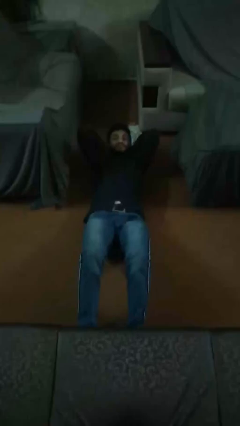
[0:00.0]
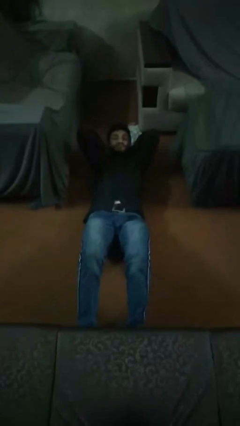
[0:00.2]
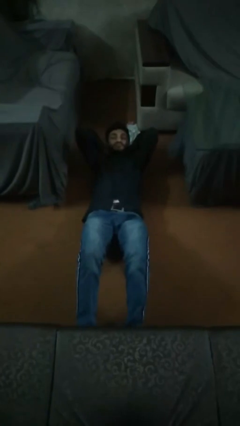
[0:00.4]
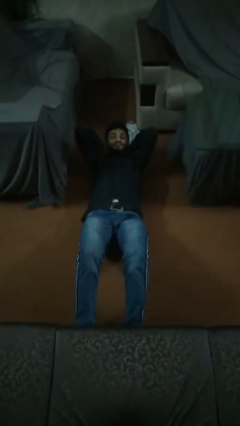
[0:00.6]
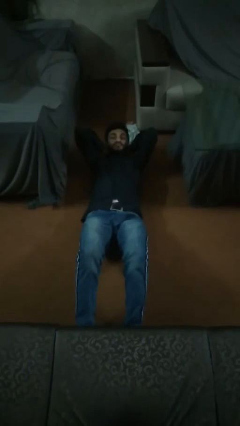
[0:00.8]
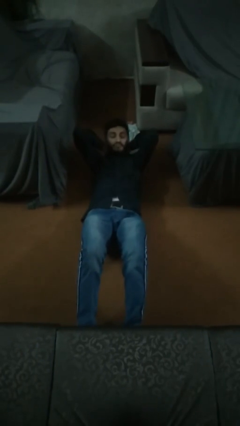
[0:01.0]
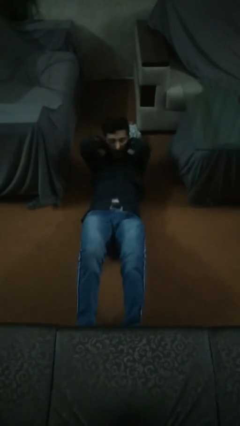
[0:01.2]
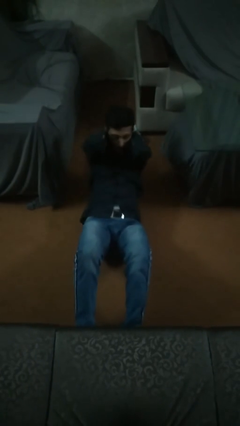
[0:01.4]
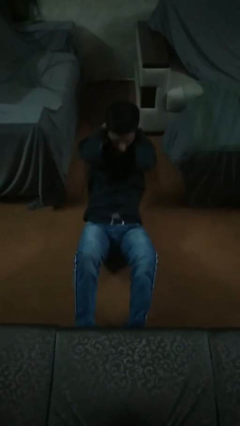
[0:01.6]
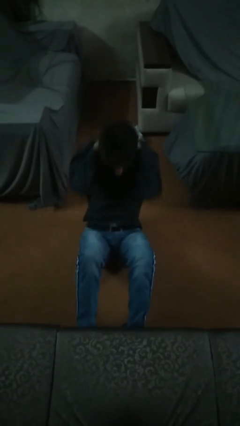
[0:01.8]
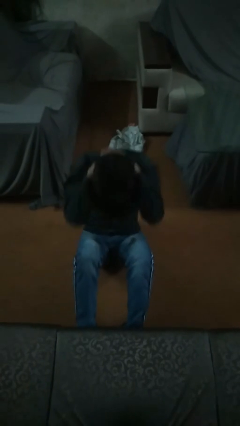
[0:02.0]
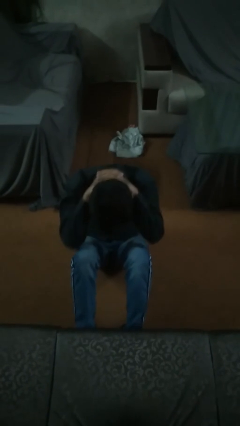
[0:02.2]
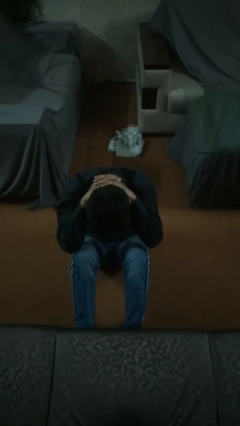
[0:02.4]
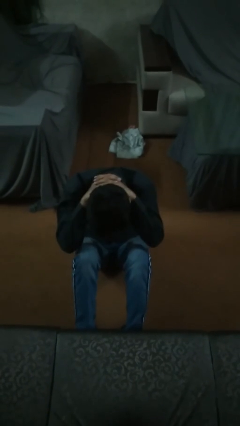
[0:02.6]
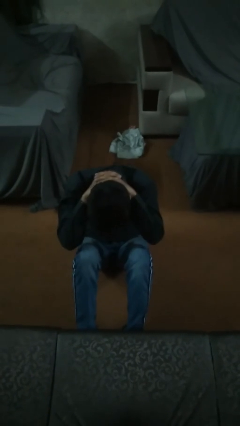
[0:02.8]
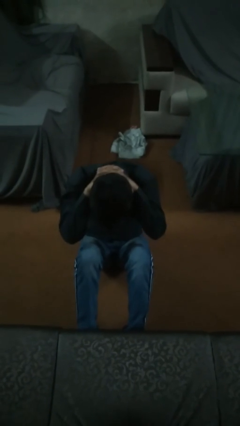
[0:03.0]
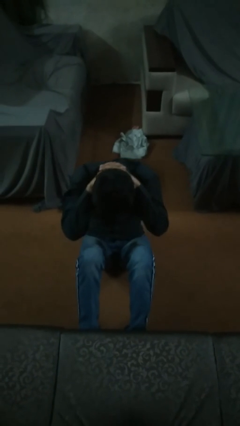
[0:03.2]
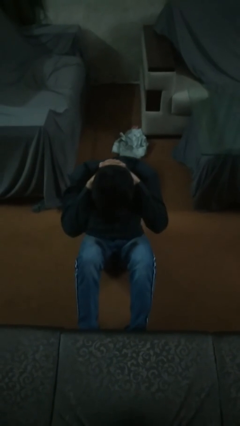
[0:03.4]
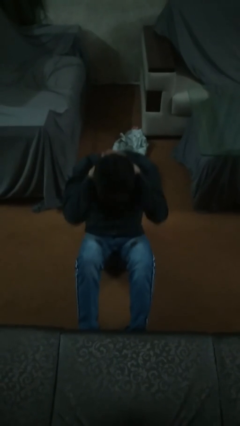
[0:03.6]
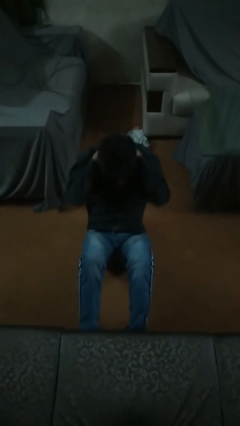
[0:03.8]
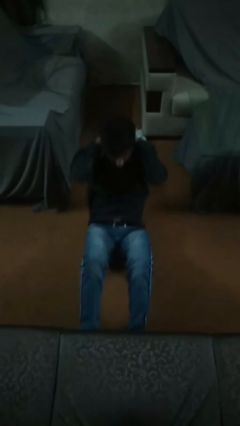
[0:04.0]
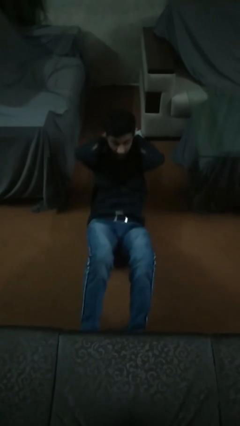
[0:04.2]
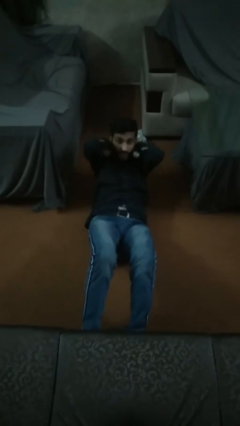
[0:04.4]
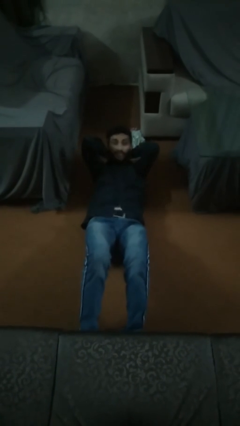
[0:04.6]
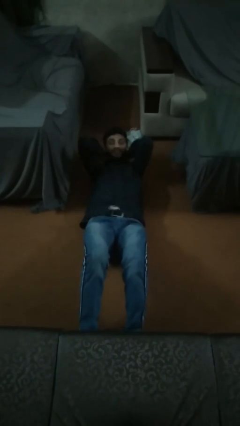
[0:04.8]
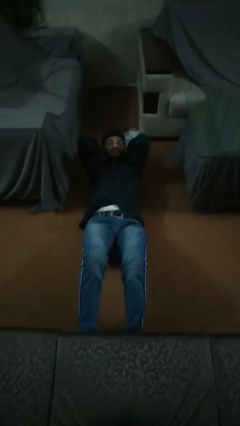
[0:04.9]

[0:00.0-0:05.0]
person exercises with situp

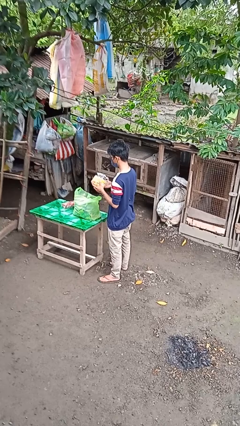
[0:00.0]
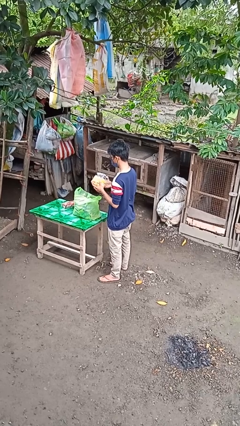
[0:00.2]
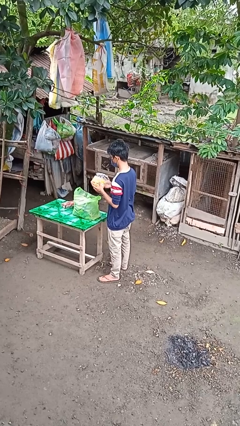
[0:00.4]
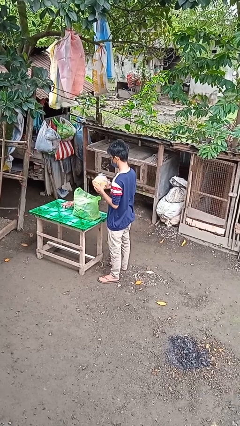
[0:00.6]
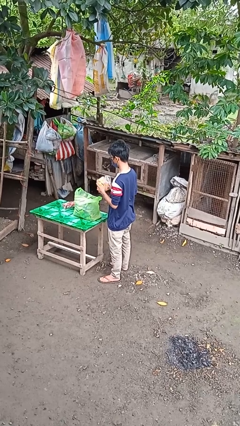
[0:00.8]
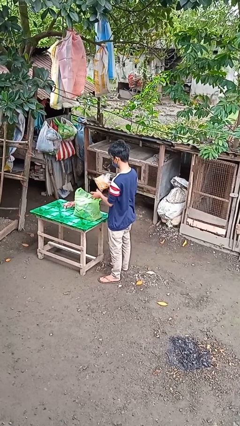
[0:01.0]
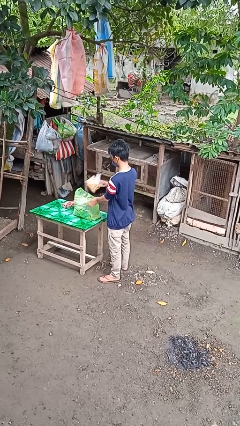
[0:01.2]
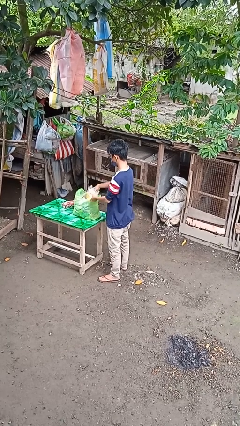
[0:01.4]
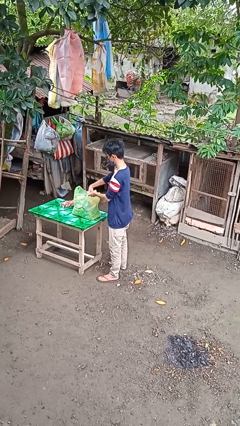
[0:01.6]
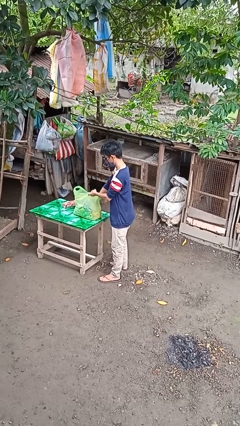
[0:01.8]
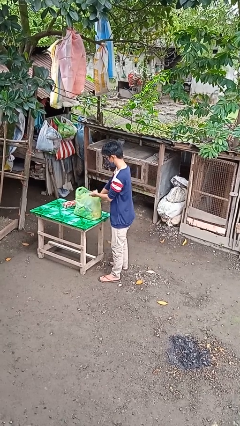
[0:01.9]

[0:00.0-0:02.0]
person puts object into bag

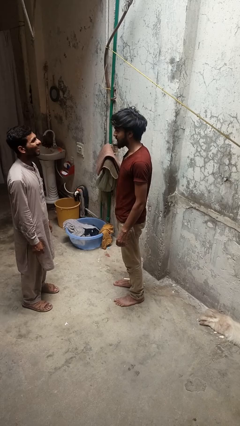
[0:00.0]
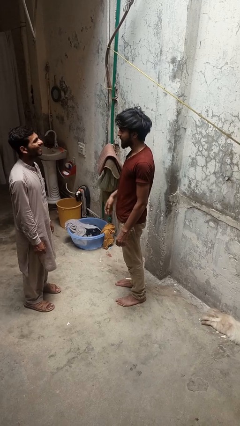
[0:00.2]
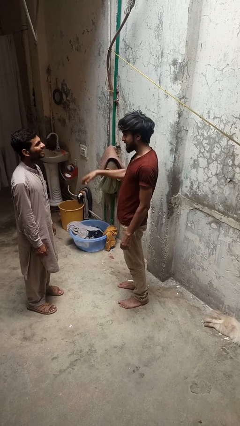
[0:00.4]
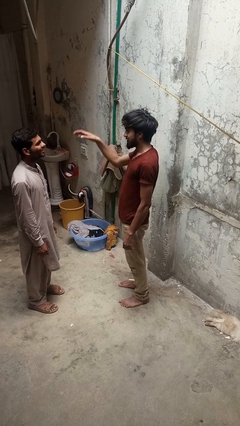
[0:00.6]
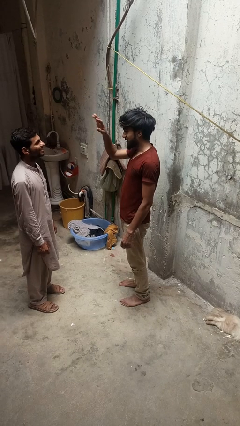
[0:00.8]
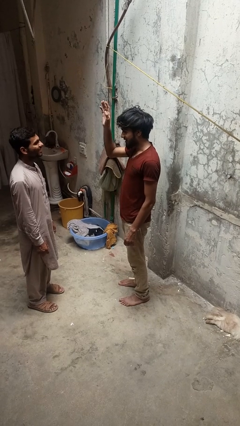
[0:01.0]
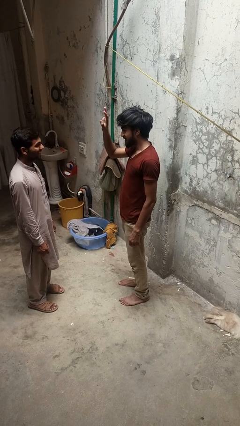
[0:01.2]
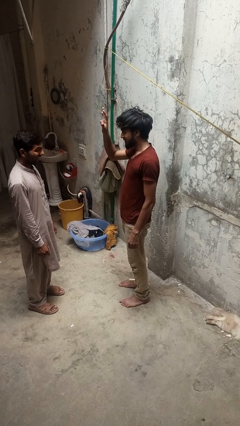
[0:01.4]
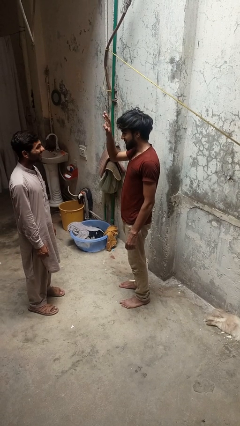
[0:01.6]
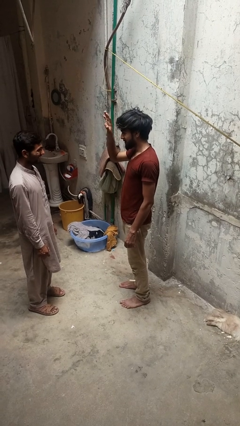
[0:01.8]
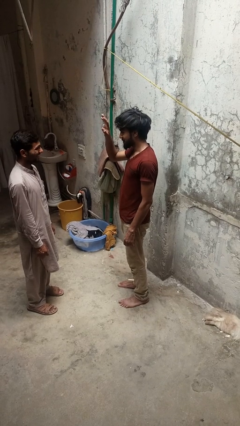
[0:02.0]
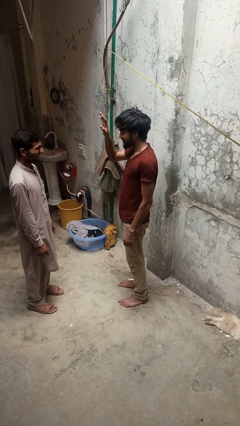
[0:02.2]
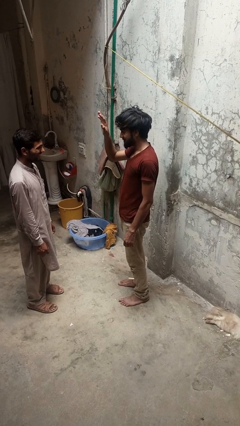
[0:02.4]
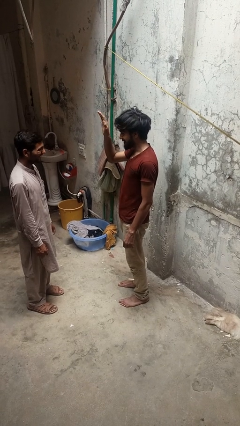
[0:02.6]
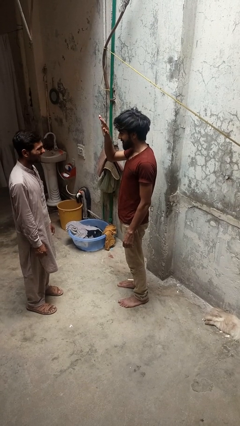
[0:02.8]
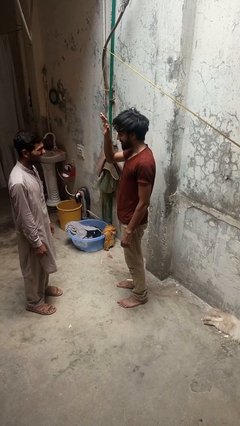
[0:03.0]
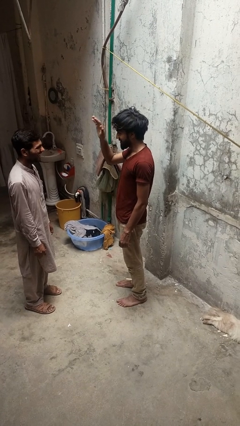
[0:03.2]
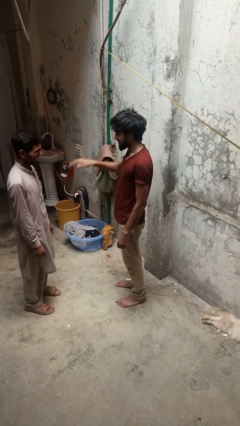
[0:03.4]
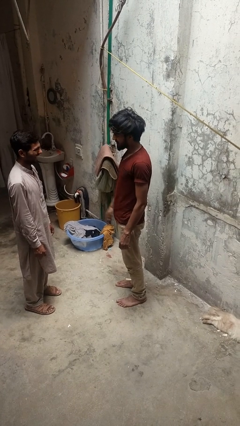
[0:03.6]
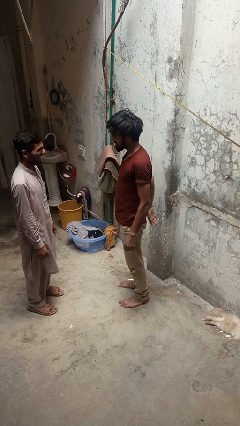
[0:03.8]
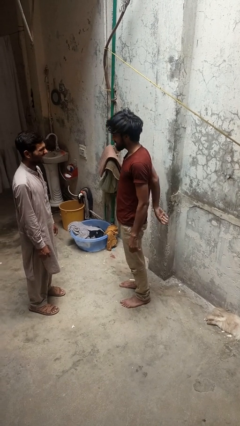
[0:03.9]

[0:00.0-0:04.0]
person waves at person

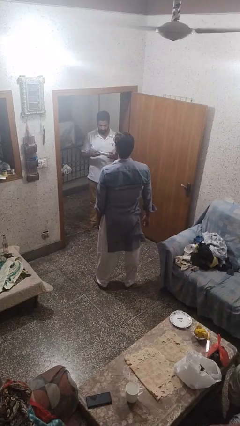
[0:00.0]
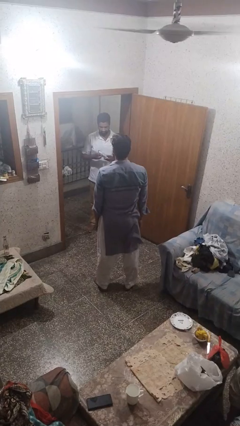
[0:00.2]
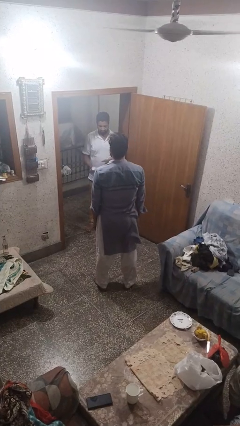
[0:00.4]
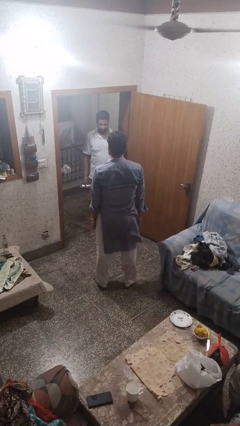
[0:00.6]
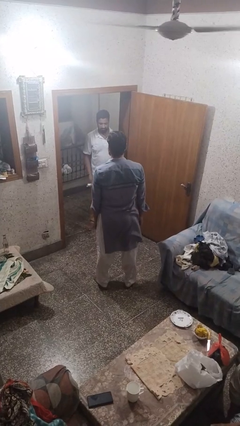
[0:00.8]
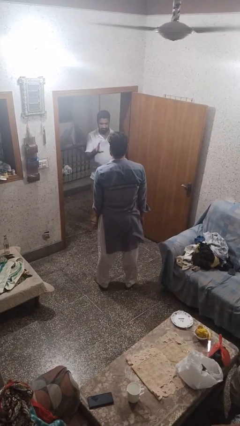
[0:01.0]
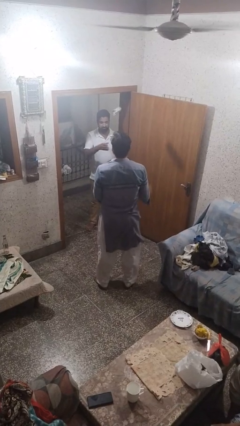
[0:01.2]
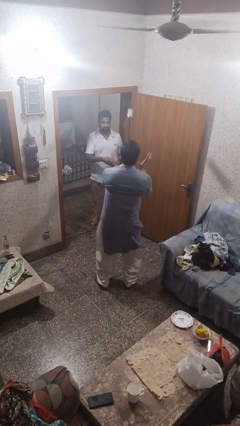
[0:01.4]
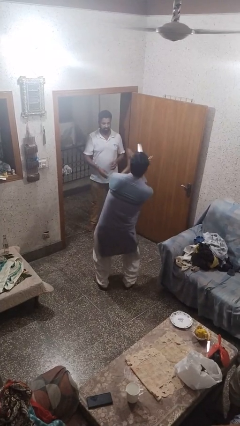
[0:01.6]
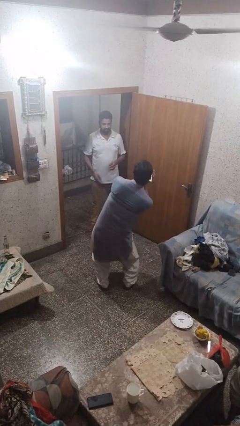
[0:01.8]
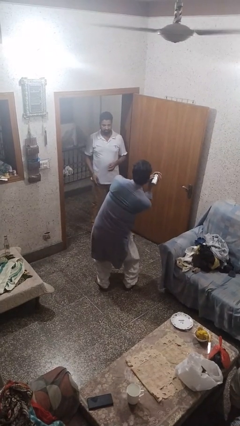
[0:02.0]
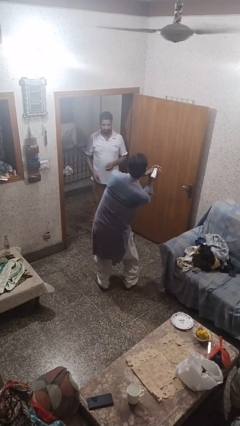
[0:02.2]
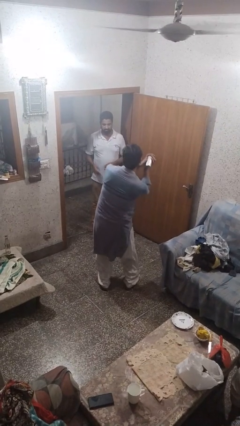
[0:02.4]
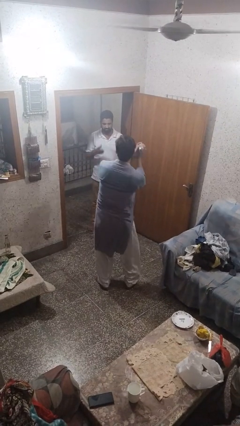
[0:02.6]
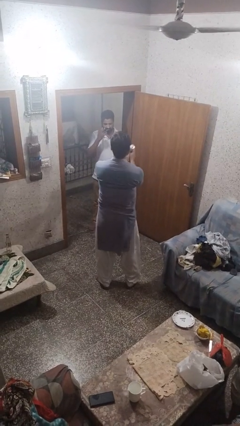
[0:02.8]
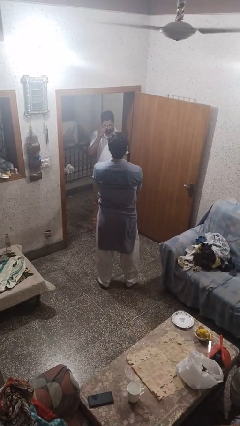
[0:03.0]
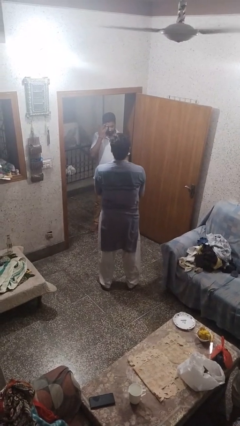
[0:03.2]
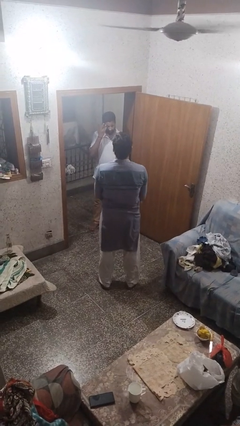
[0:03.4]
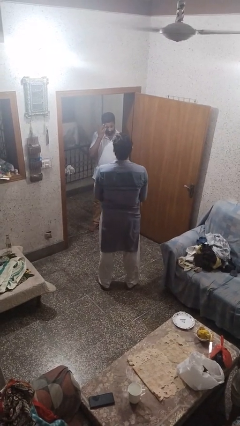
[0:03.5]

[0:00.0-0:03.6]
person catches object from person

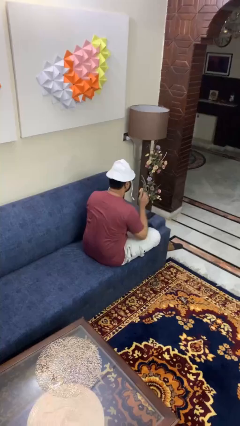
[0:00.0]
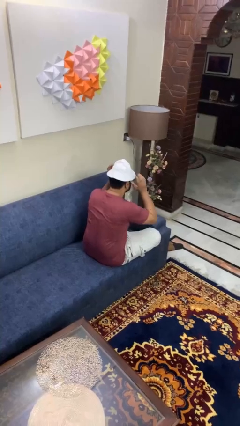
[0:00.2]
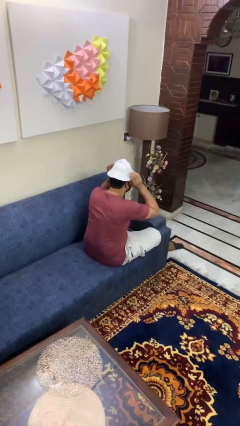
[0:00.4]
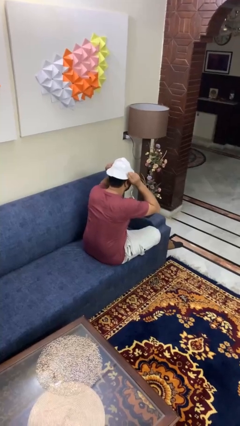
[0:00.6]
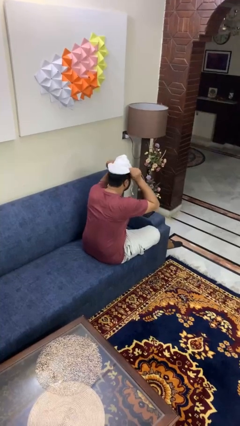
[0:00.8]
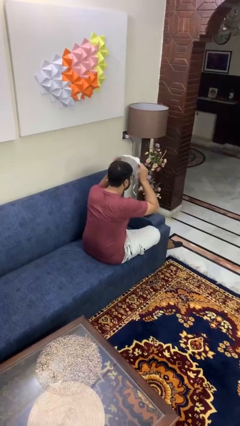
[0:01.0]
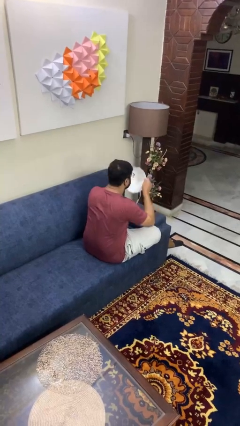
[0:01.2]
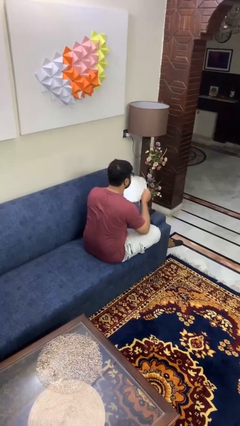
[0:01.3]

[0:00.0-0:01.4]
person takes off hat

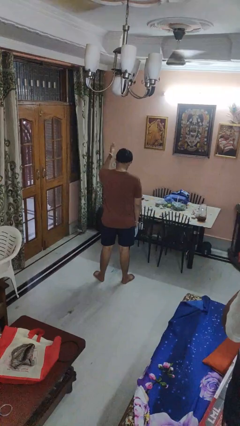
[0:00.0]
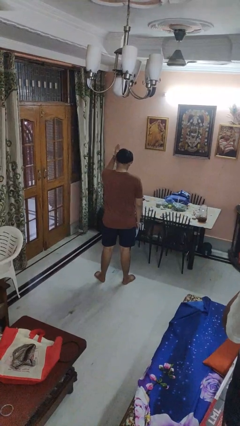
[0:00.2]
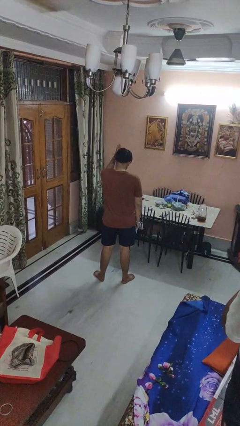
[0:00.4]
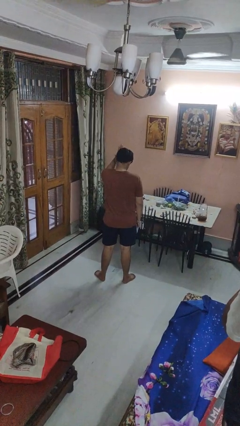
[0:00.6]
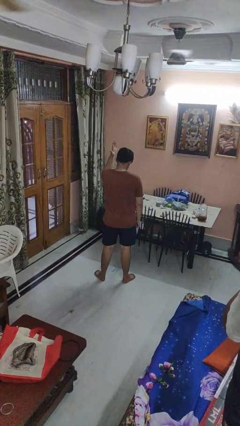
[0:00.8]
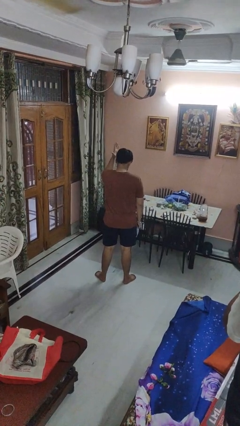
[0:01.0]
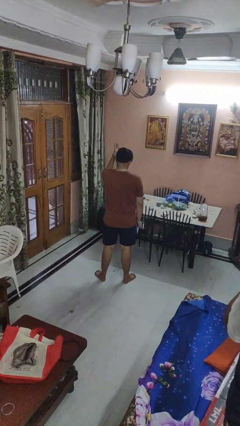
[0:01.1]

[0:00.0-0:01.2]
person pats head
